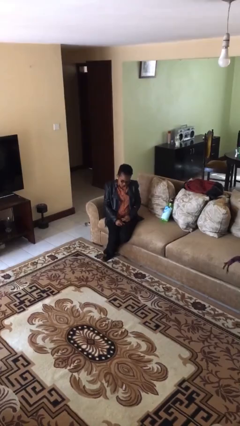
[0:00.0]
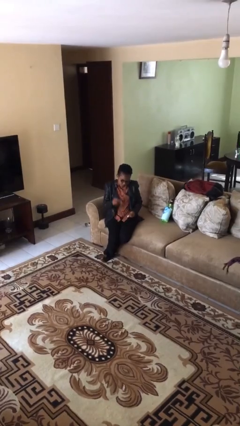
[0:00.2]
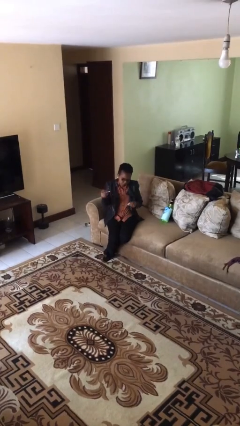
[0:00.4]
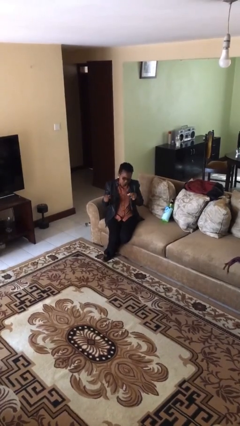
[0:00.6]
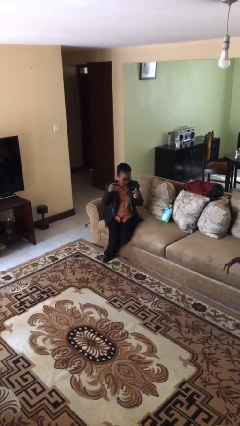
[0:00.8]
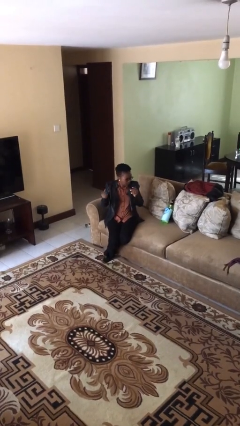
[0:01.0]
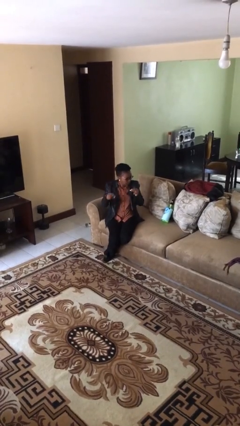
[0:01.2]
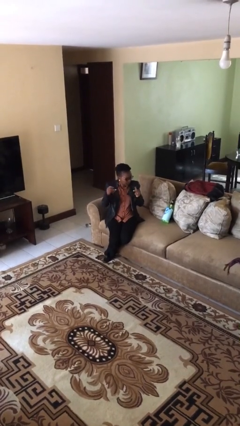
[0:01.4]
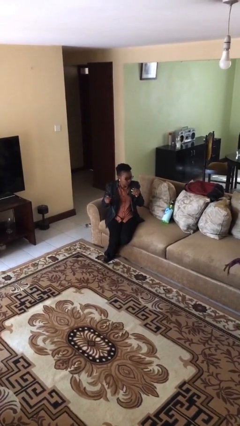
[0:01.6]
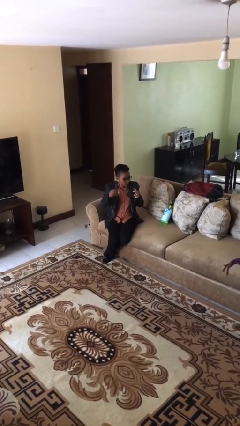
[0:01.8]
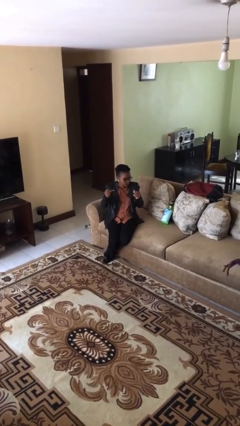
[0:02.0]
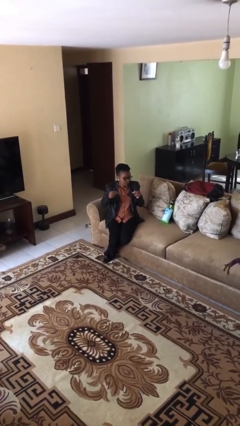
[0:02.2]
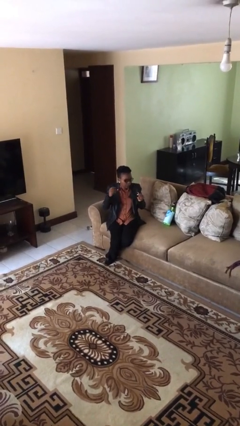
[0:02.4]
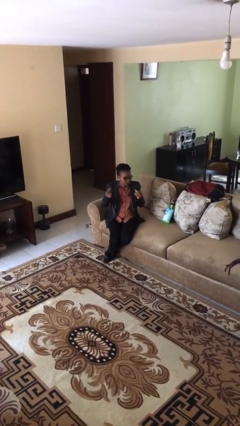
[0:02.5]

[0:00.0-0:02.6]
person snaps fingers

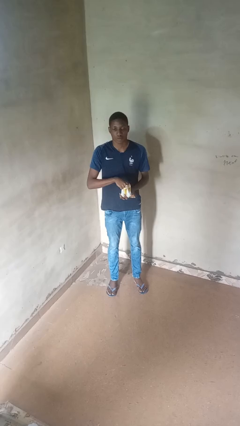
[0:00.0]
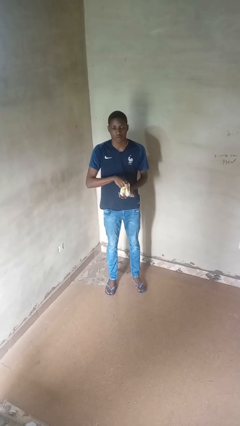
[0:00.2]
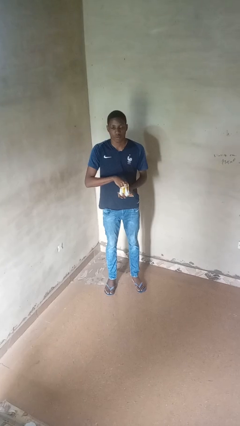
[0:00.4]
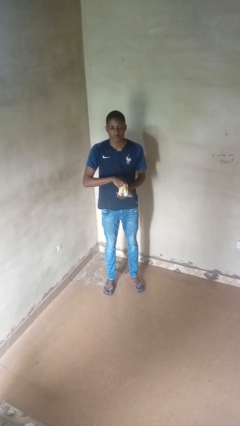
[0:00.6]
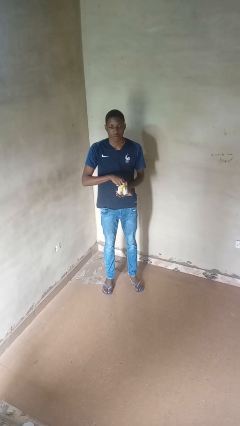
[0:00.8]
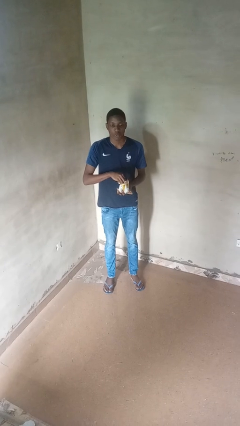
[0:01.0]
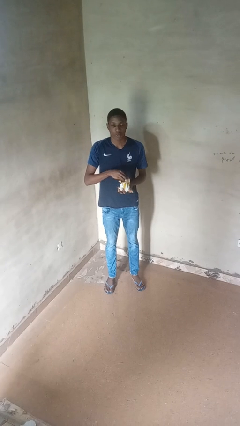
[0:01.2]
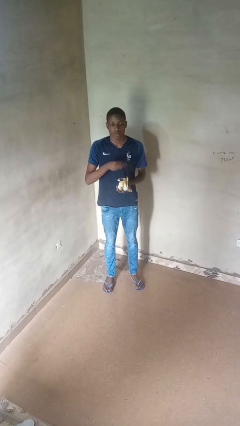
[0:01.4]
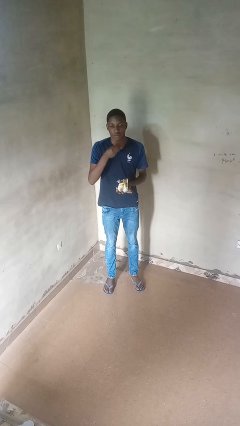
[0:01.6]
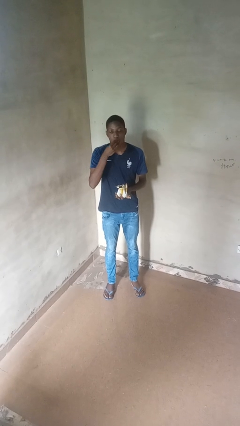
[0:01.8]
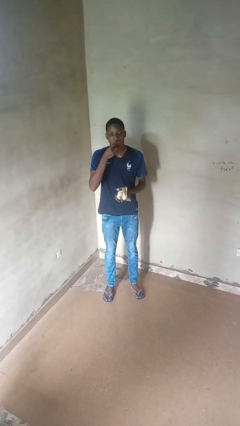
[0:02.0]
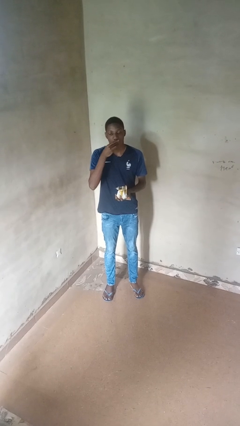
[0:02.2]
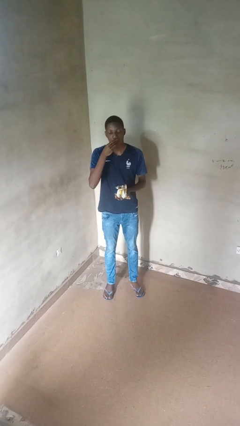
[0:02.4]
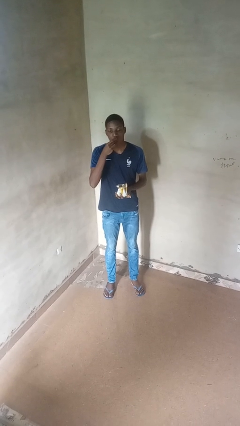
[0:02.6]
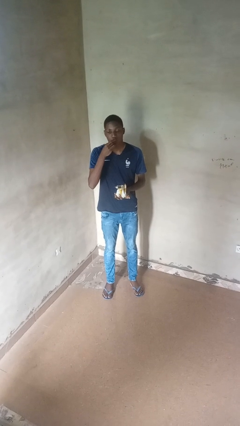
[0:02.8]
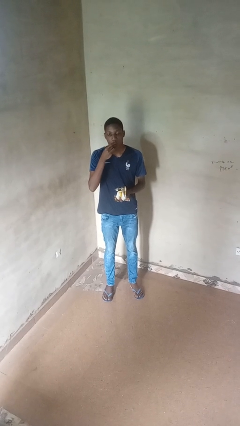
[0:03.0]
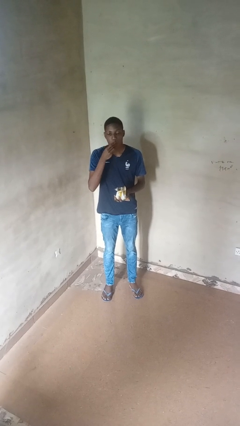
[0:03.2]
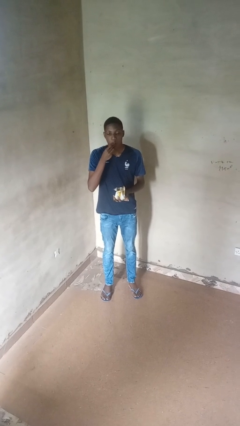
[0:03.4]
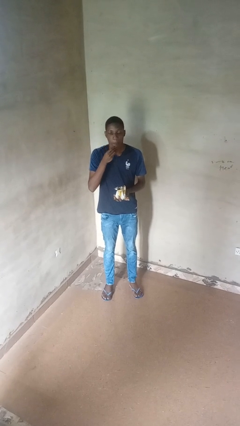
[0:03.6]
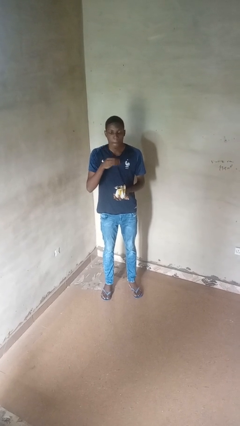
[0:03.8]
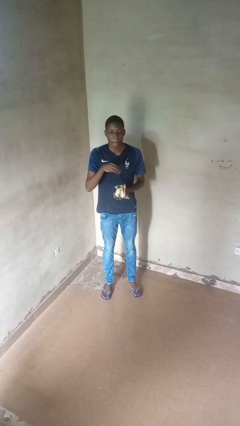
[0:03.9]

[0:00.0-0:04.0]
person eats snack from bag

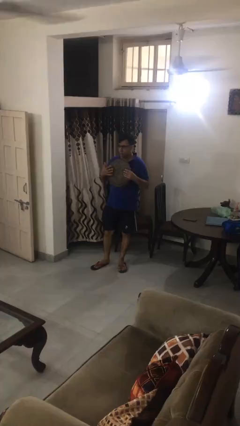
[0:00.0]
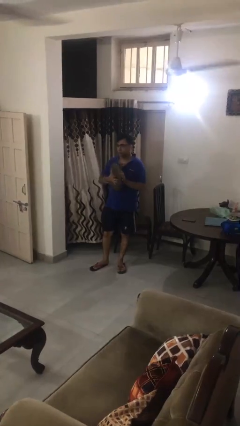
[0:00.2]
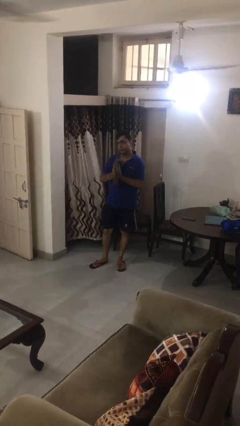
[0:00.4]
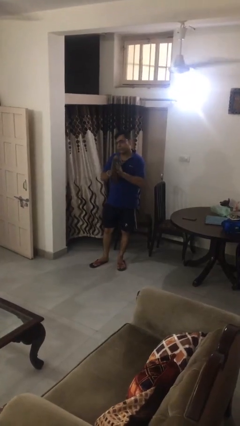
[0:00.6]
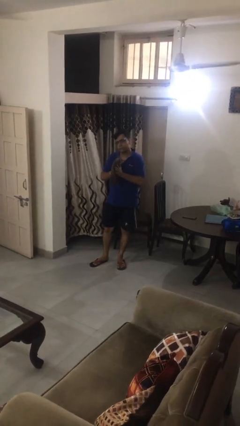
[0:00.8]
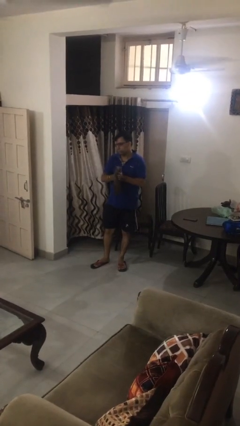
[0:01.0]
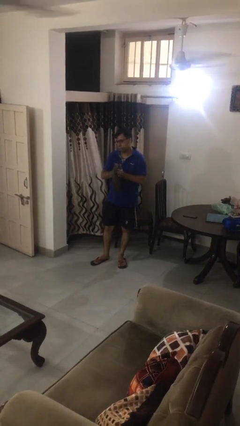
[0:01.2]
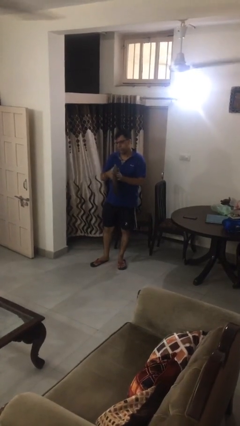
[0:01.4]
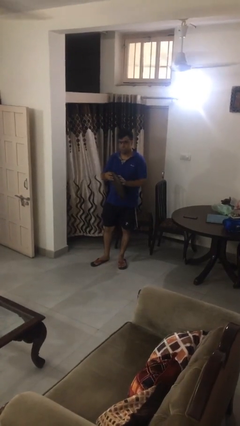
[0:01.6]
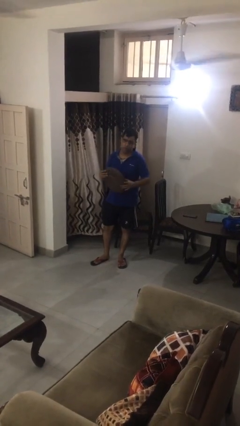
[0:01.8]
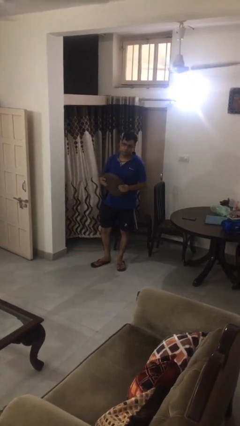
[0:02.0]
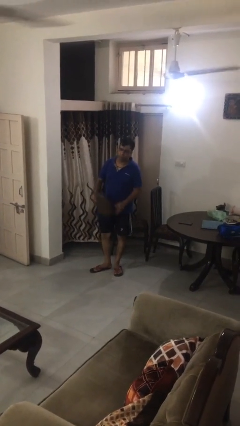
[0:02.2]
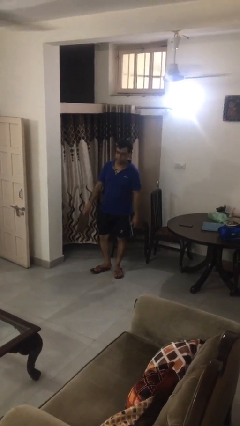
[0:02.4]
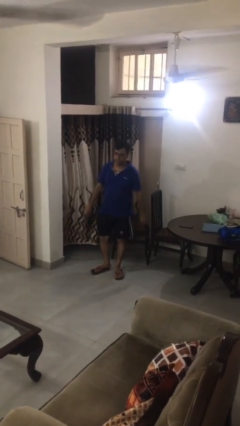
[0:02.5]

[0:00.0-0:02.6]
person squeezes object

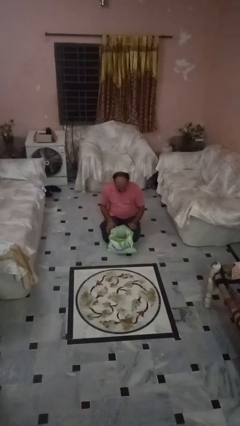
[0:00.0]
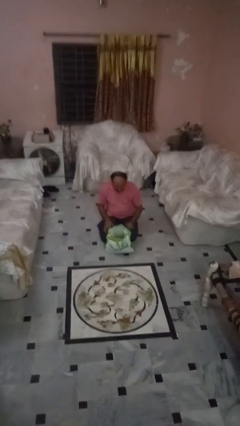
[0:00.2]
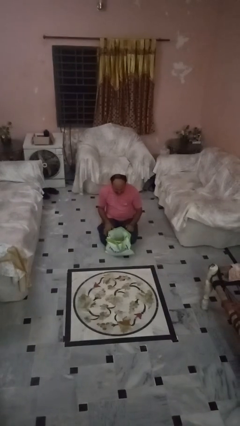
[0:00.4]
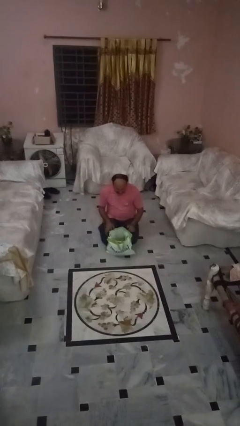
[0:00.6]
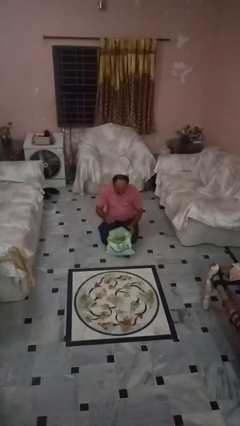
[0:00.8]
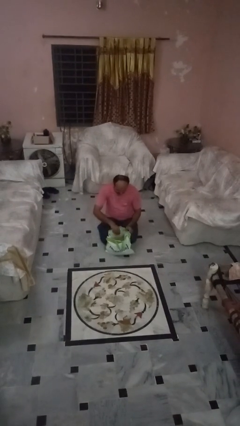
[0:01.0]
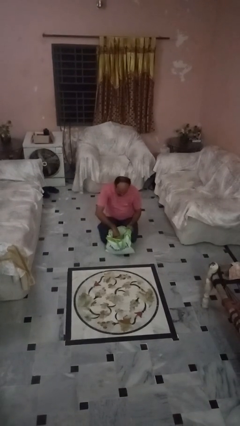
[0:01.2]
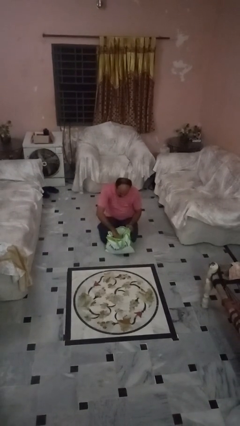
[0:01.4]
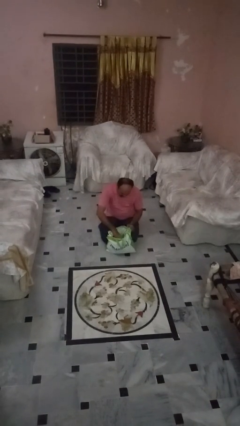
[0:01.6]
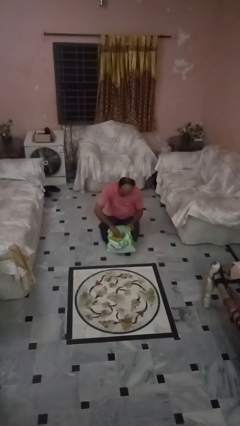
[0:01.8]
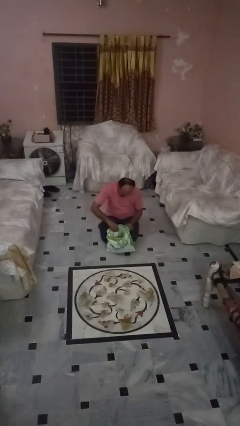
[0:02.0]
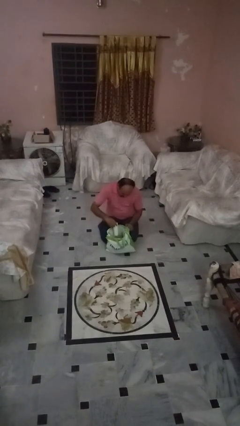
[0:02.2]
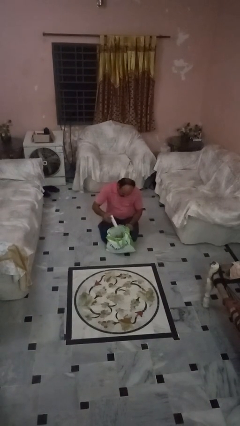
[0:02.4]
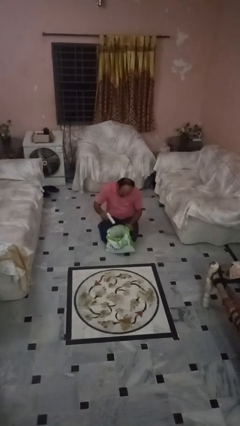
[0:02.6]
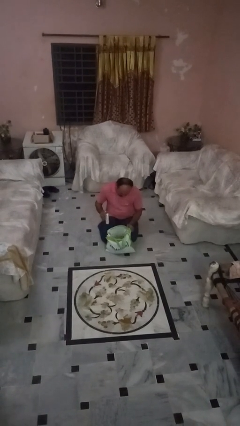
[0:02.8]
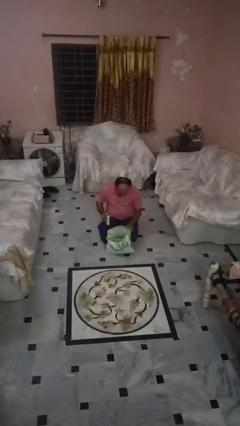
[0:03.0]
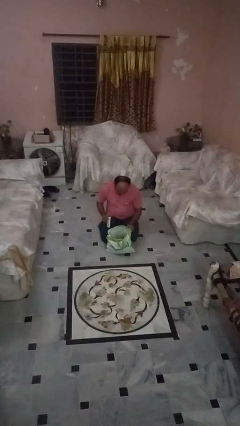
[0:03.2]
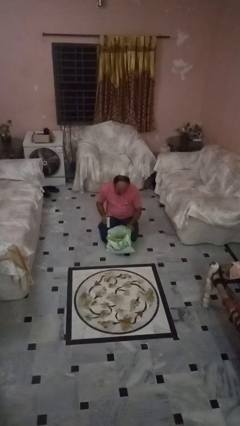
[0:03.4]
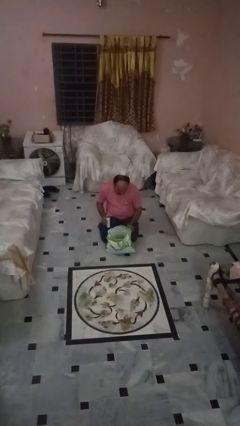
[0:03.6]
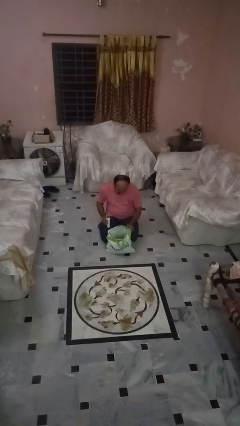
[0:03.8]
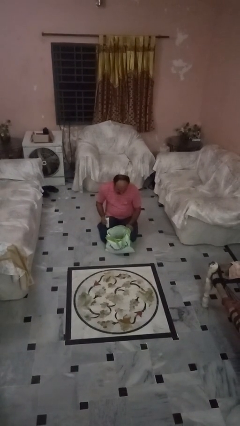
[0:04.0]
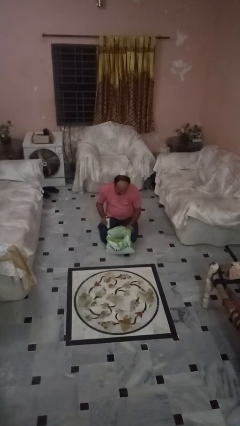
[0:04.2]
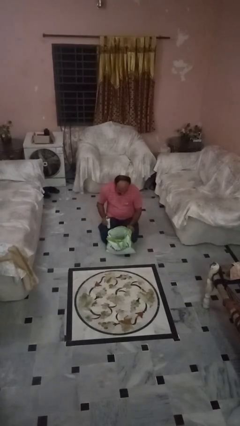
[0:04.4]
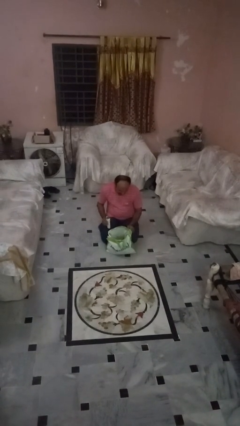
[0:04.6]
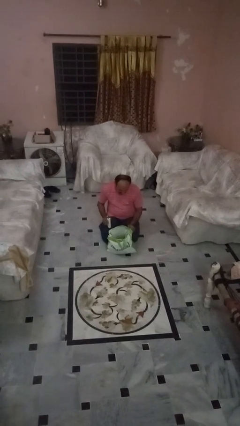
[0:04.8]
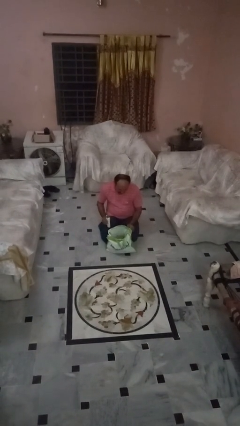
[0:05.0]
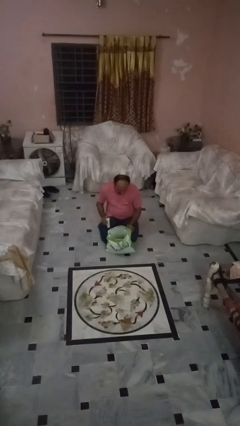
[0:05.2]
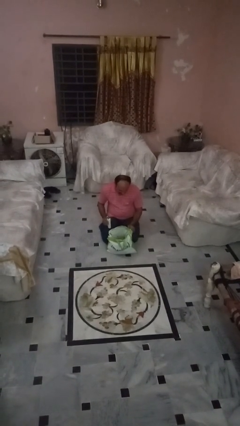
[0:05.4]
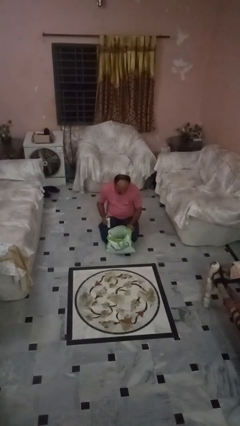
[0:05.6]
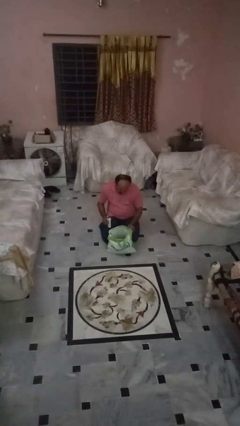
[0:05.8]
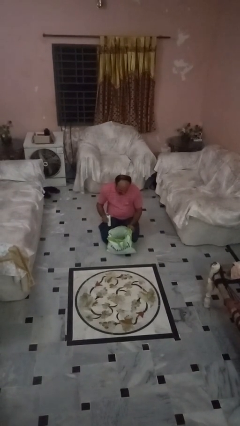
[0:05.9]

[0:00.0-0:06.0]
person takes object from bag

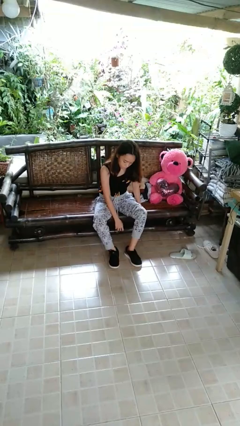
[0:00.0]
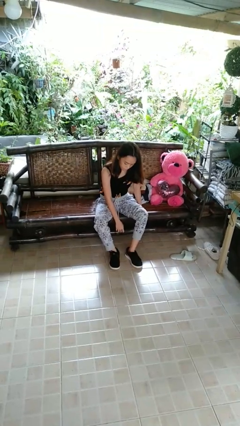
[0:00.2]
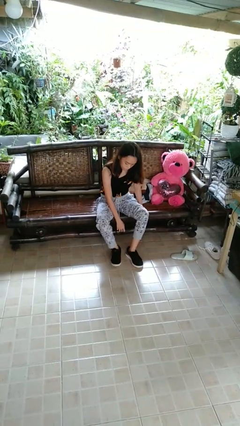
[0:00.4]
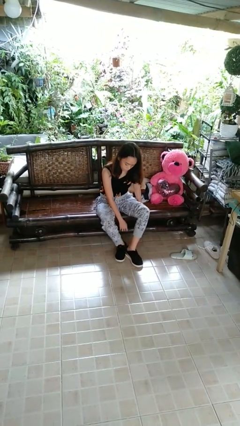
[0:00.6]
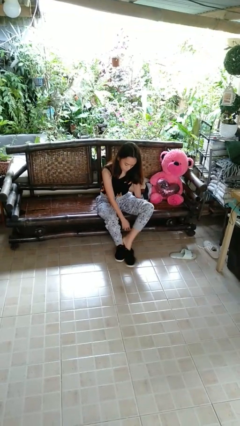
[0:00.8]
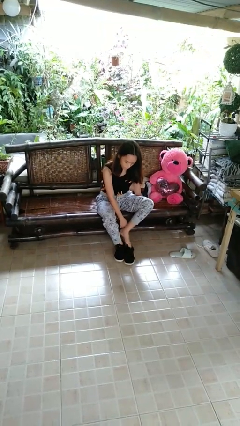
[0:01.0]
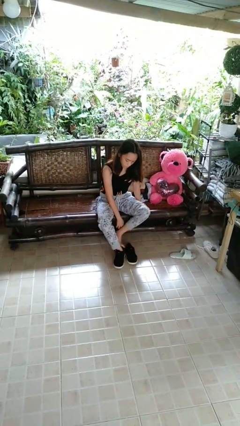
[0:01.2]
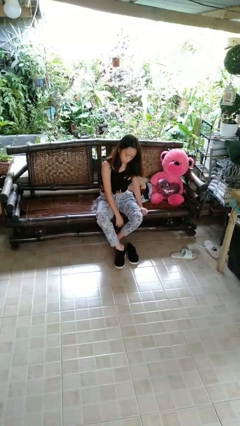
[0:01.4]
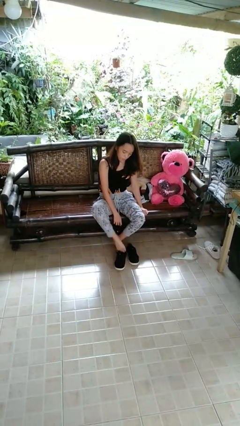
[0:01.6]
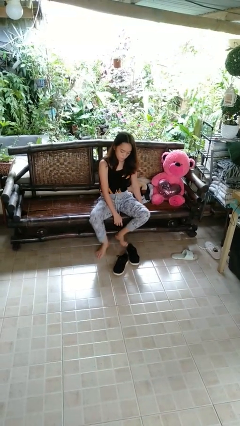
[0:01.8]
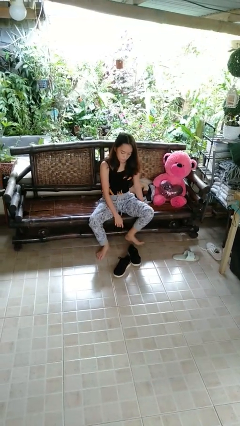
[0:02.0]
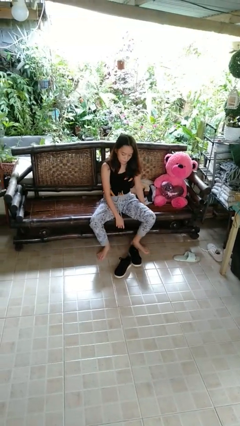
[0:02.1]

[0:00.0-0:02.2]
person takes off shoes
